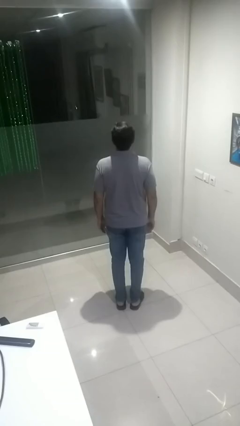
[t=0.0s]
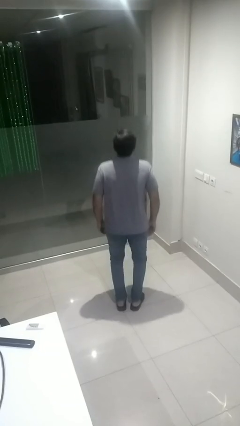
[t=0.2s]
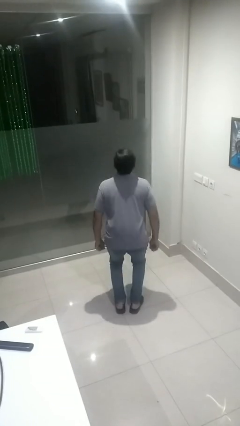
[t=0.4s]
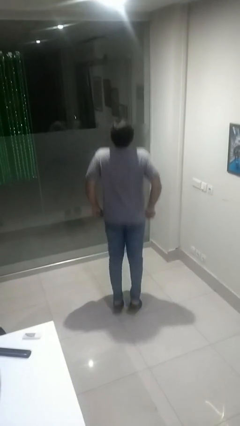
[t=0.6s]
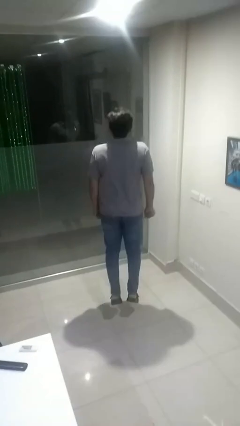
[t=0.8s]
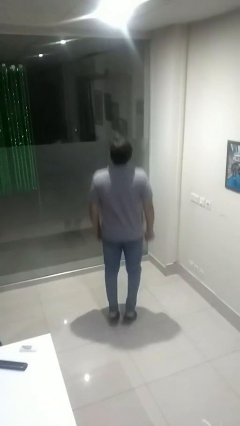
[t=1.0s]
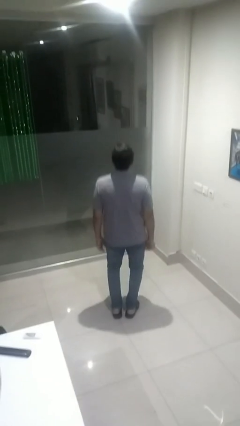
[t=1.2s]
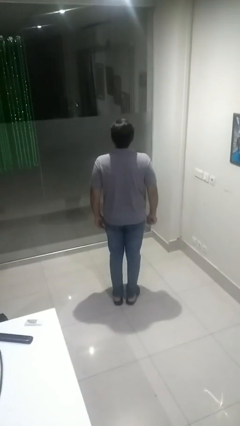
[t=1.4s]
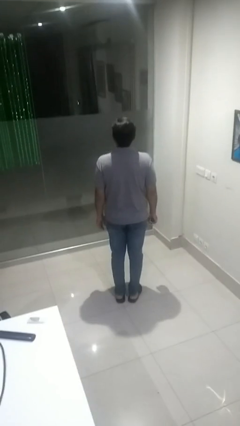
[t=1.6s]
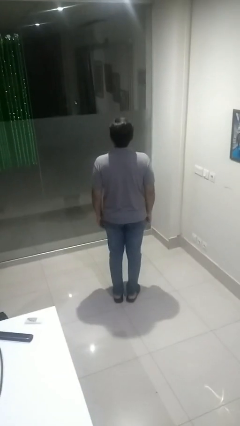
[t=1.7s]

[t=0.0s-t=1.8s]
person jumps

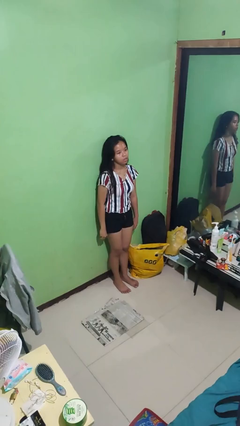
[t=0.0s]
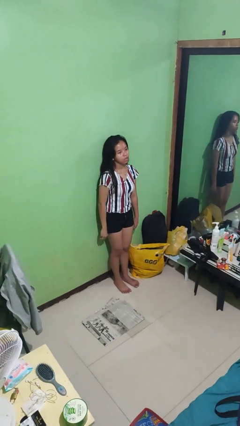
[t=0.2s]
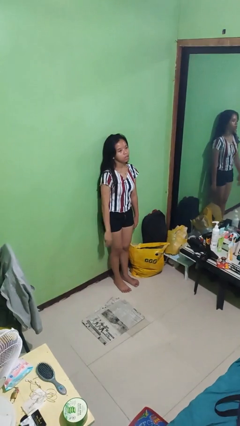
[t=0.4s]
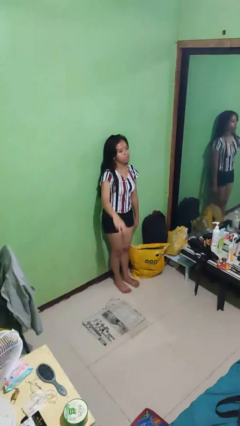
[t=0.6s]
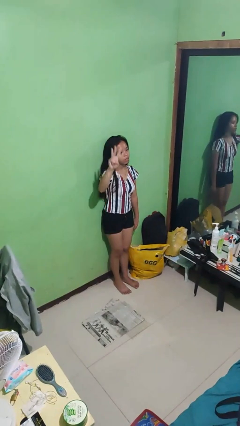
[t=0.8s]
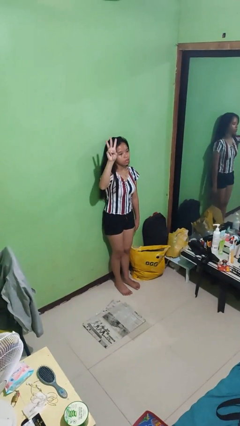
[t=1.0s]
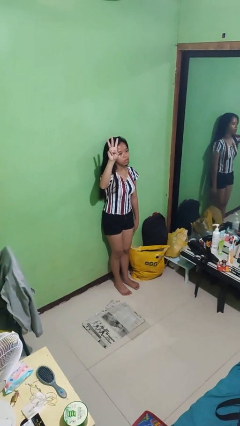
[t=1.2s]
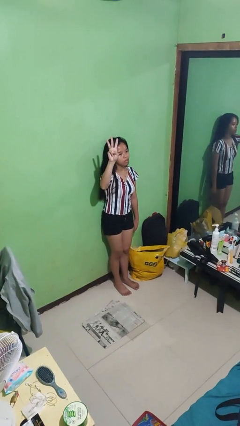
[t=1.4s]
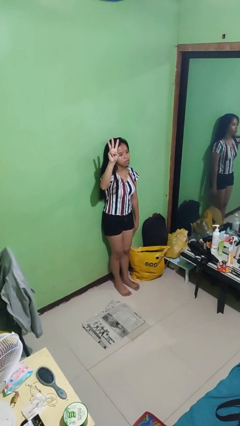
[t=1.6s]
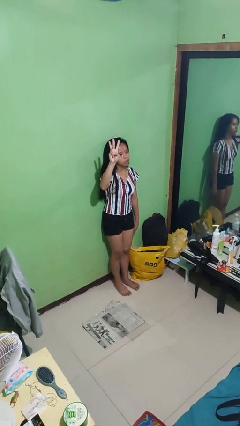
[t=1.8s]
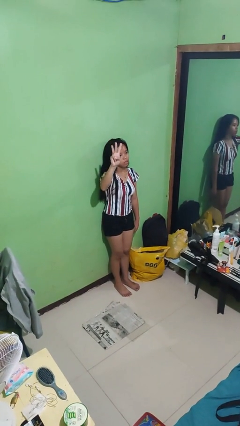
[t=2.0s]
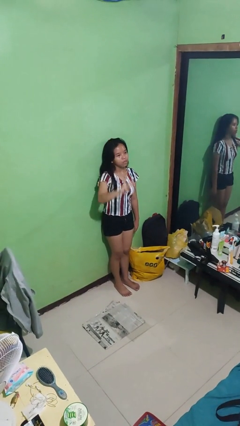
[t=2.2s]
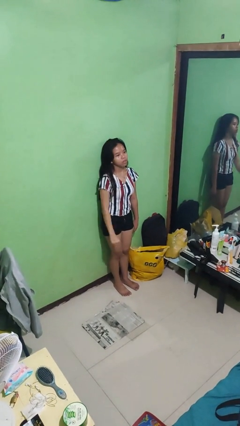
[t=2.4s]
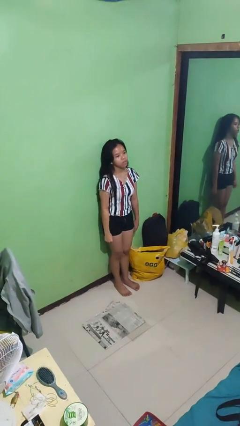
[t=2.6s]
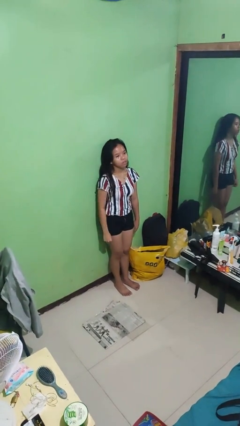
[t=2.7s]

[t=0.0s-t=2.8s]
person gestures number three

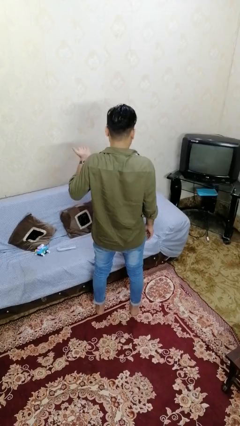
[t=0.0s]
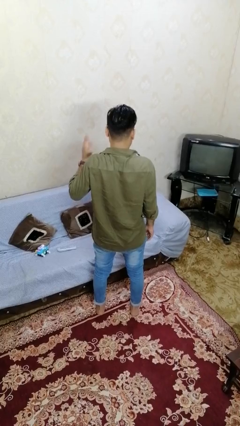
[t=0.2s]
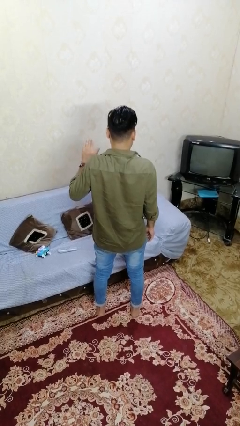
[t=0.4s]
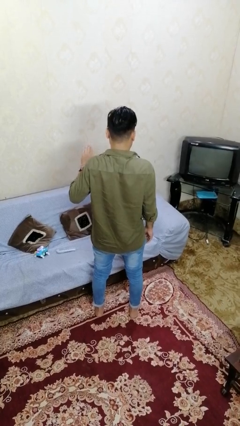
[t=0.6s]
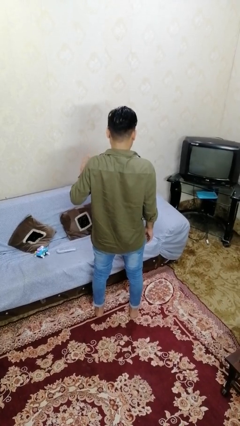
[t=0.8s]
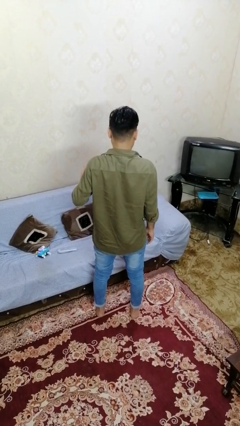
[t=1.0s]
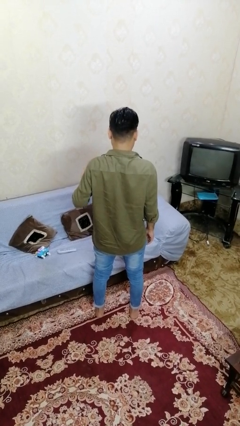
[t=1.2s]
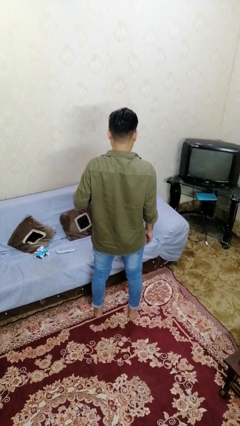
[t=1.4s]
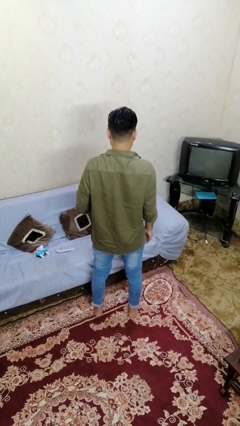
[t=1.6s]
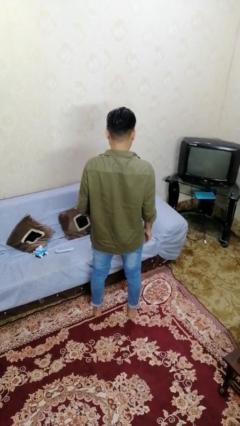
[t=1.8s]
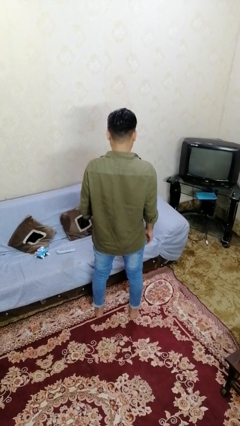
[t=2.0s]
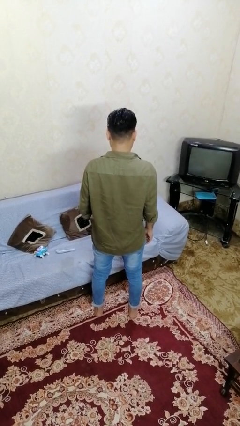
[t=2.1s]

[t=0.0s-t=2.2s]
person gestures swipe down

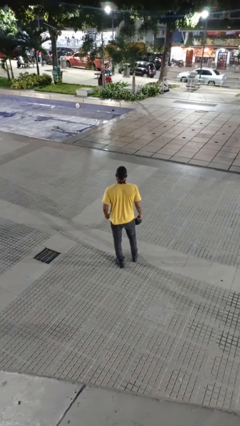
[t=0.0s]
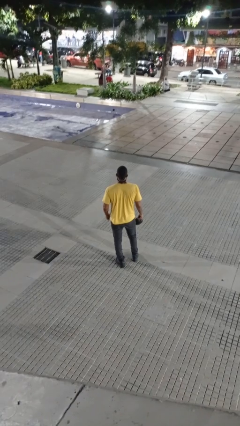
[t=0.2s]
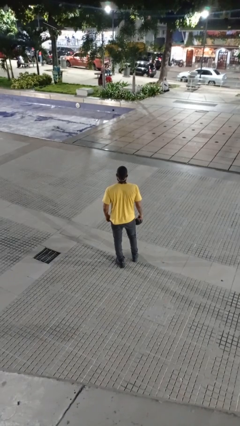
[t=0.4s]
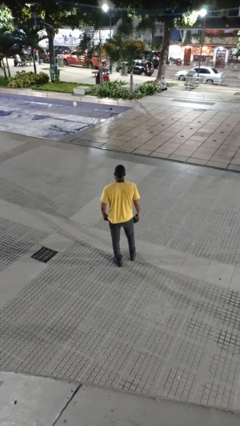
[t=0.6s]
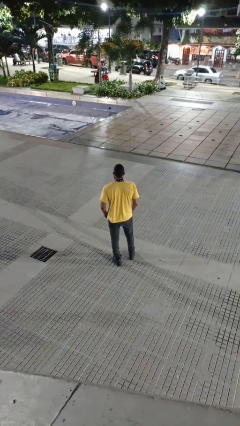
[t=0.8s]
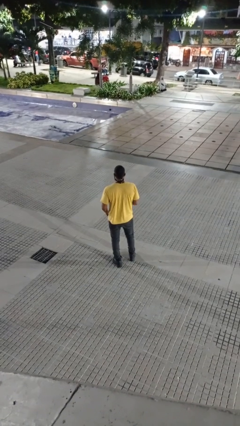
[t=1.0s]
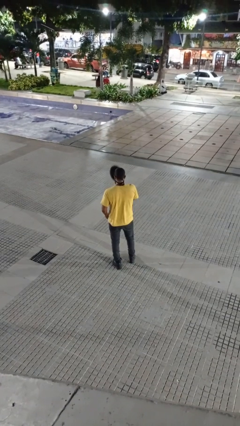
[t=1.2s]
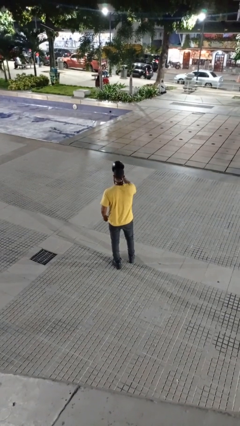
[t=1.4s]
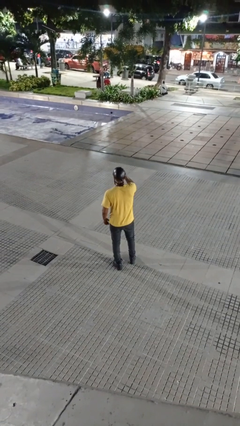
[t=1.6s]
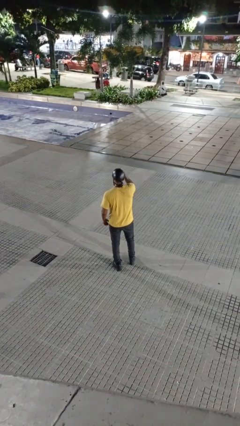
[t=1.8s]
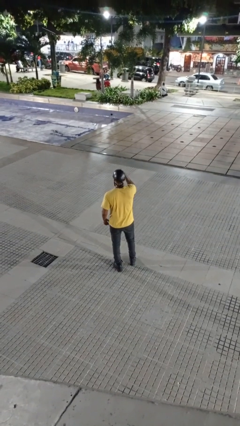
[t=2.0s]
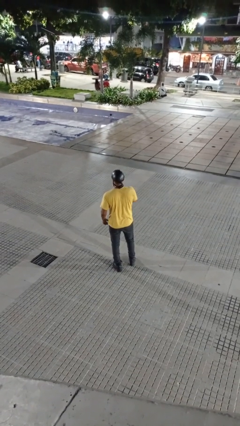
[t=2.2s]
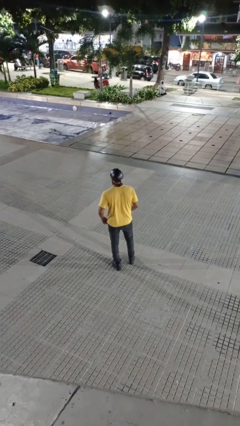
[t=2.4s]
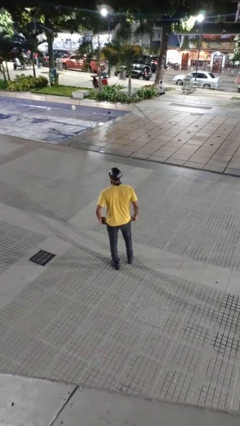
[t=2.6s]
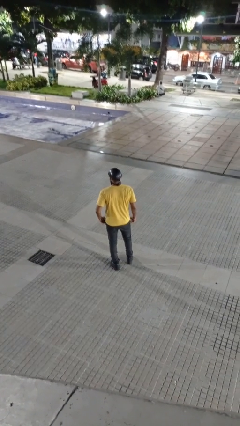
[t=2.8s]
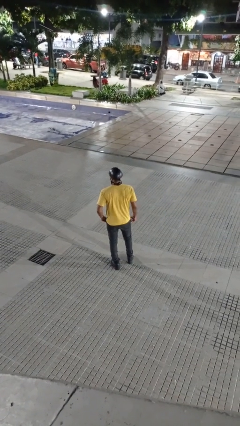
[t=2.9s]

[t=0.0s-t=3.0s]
person puts on hat

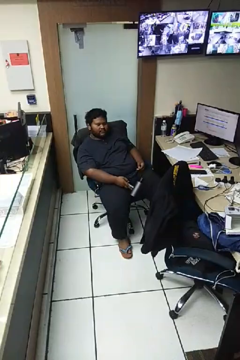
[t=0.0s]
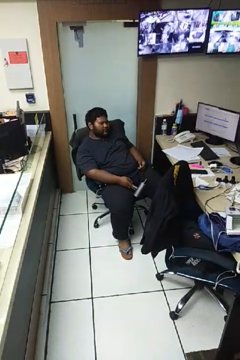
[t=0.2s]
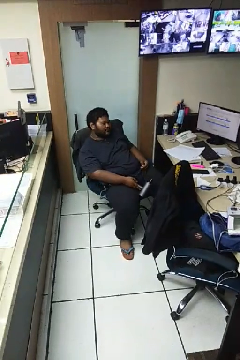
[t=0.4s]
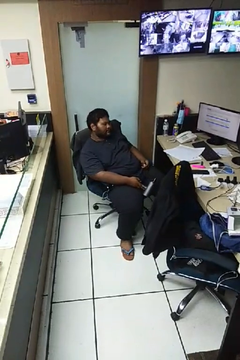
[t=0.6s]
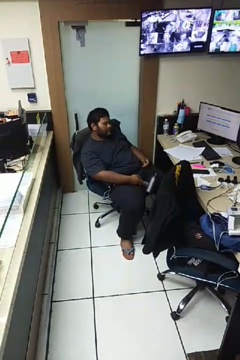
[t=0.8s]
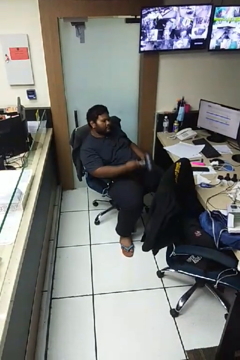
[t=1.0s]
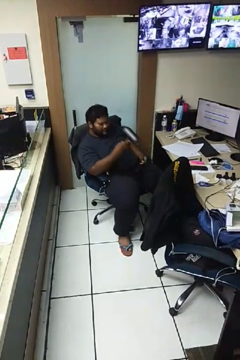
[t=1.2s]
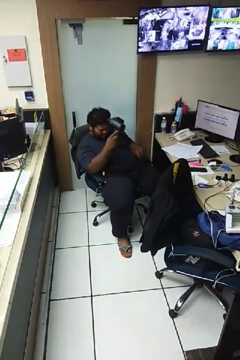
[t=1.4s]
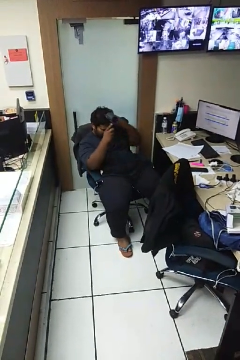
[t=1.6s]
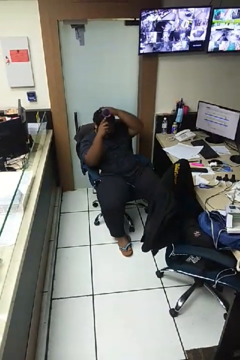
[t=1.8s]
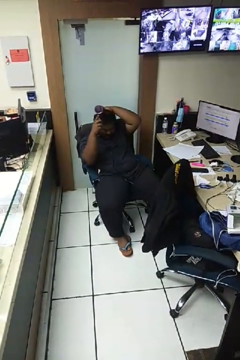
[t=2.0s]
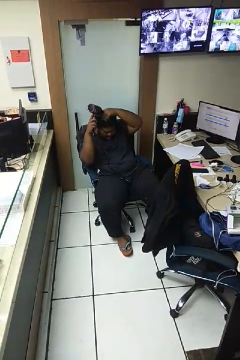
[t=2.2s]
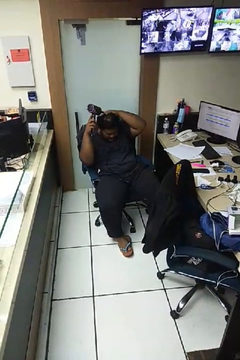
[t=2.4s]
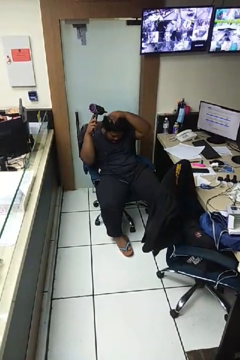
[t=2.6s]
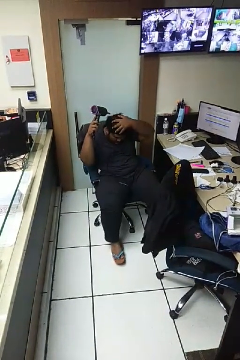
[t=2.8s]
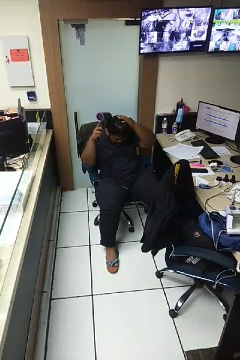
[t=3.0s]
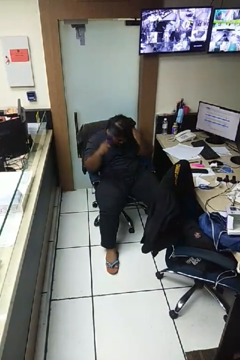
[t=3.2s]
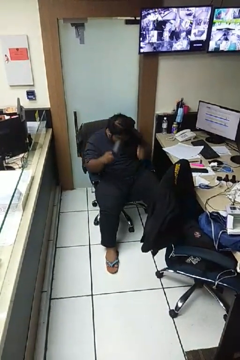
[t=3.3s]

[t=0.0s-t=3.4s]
person dries hair with hairdryer

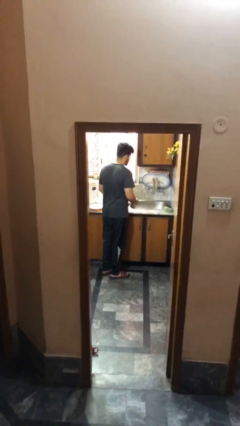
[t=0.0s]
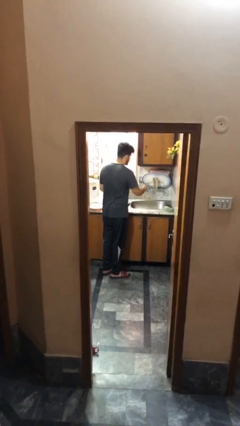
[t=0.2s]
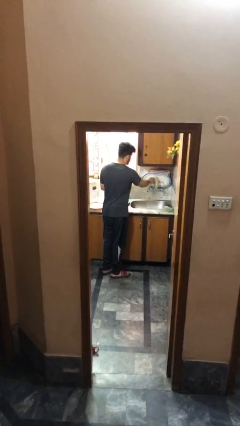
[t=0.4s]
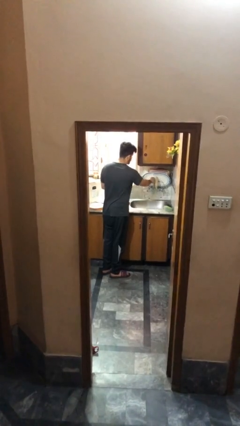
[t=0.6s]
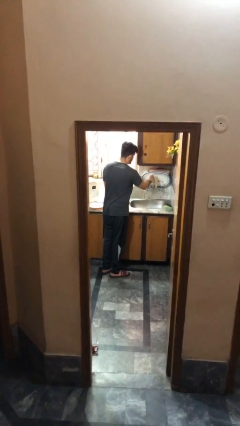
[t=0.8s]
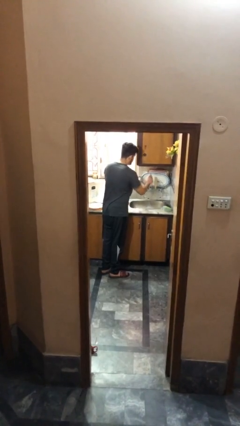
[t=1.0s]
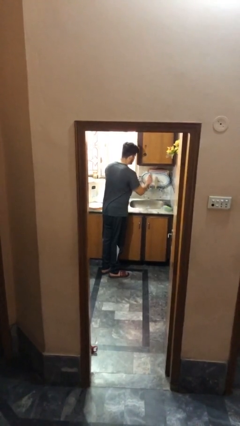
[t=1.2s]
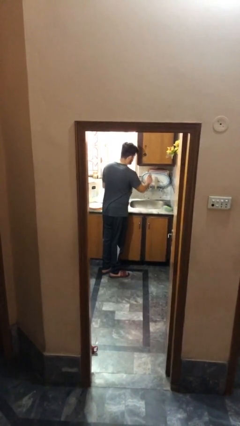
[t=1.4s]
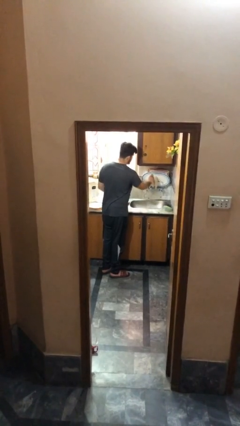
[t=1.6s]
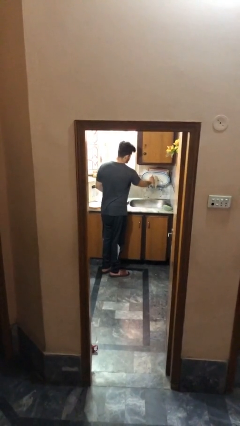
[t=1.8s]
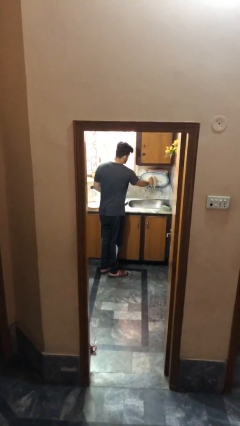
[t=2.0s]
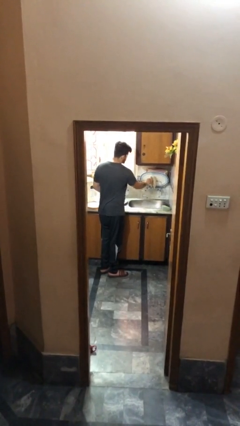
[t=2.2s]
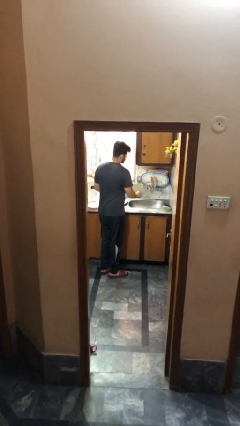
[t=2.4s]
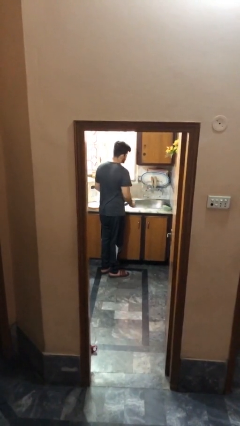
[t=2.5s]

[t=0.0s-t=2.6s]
person loads dishwasher

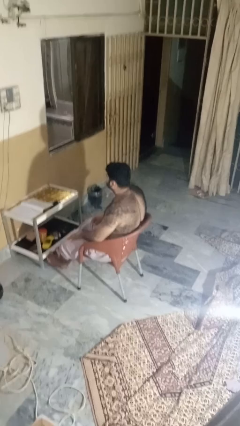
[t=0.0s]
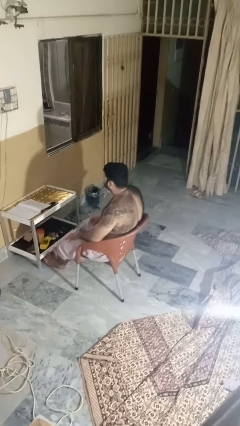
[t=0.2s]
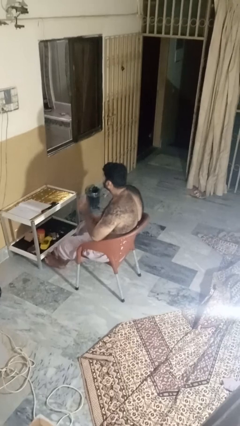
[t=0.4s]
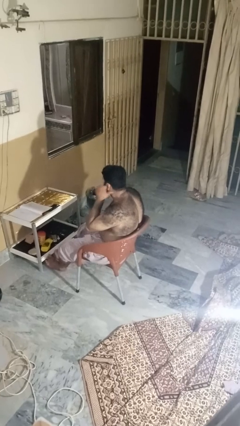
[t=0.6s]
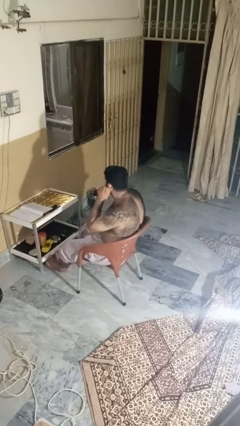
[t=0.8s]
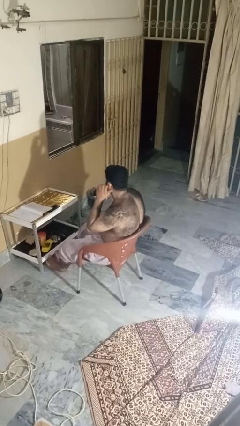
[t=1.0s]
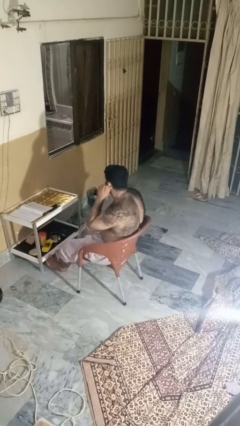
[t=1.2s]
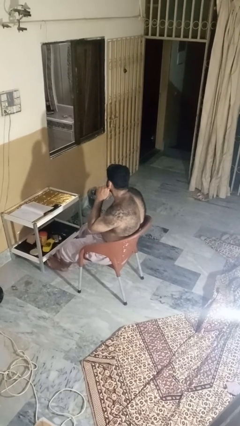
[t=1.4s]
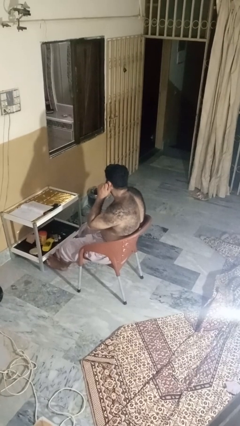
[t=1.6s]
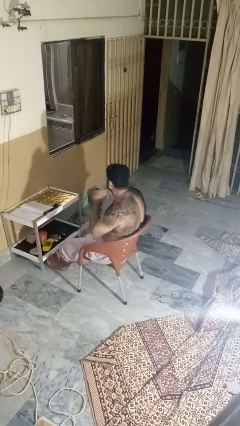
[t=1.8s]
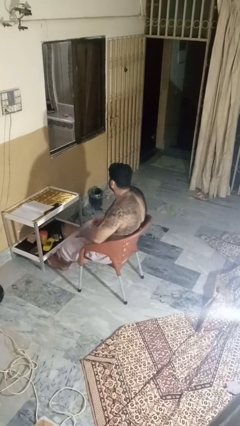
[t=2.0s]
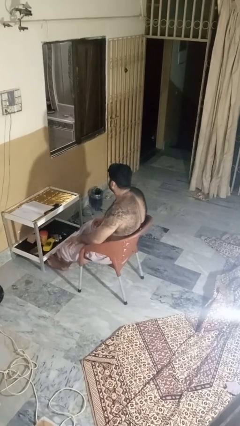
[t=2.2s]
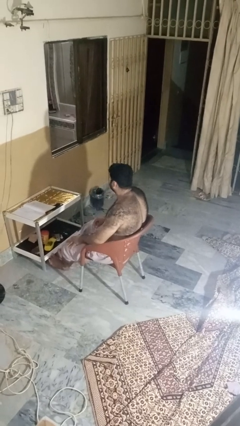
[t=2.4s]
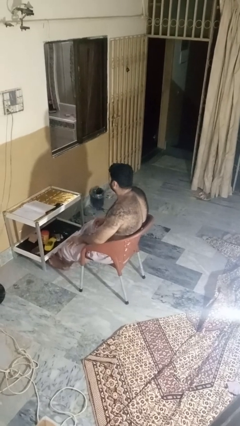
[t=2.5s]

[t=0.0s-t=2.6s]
person touches earlobe
